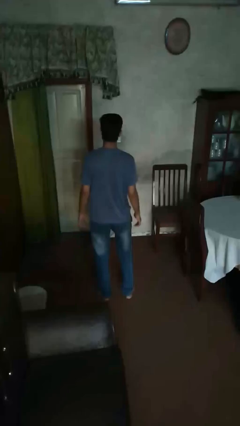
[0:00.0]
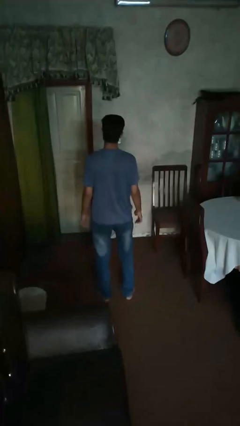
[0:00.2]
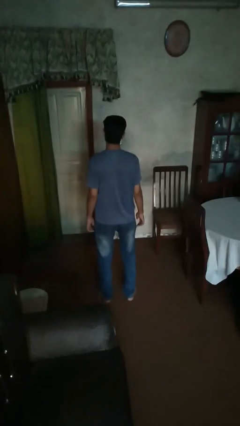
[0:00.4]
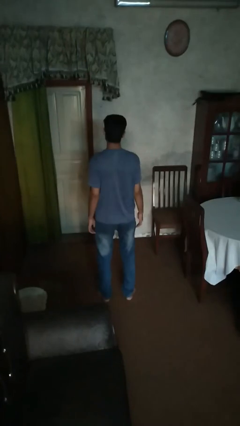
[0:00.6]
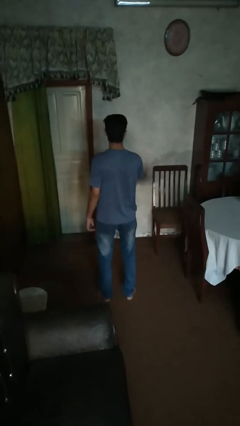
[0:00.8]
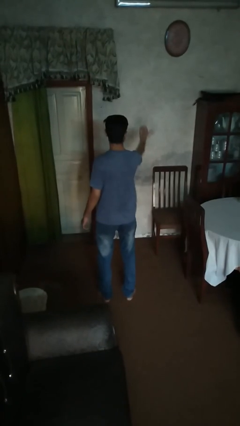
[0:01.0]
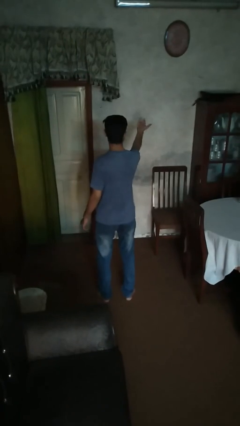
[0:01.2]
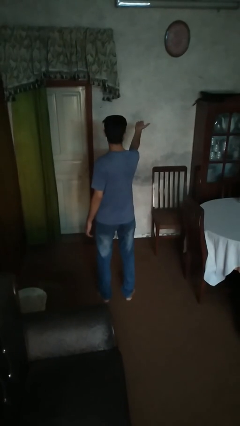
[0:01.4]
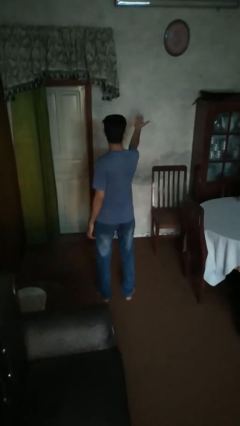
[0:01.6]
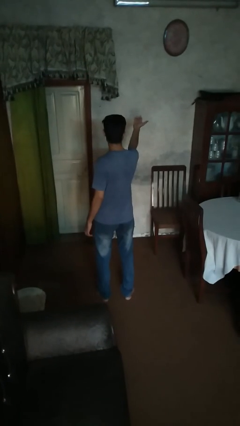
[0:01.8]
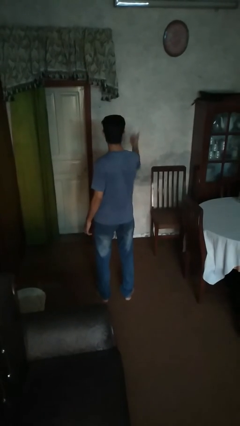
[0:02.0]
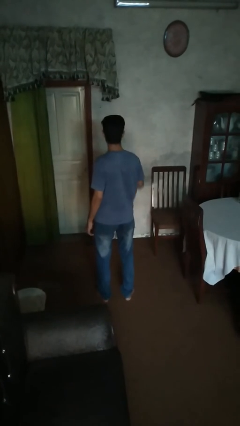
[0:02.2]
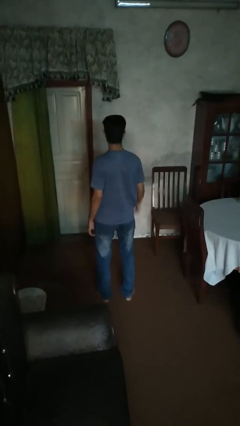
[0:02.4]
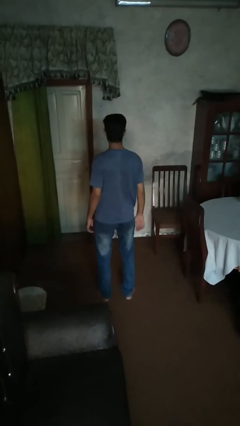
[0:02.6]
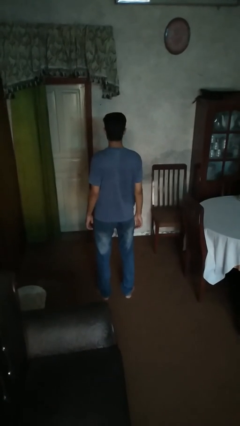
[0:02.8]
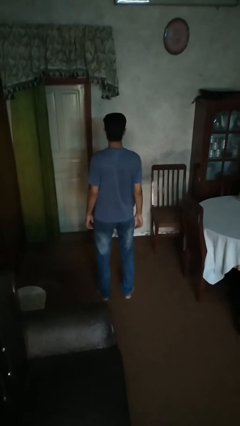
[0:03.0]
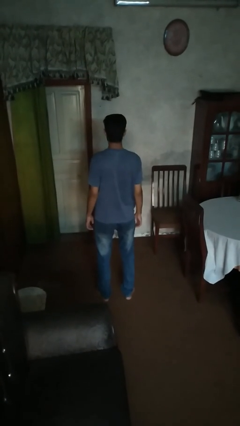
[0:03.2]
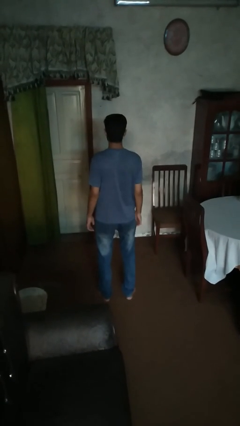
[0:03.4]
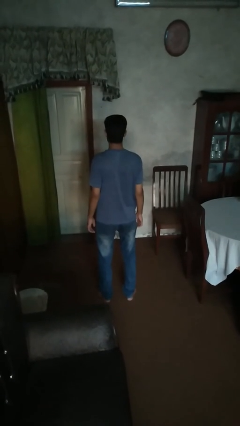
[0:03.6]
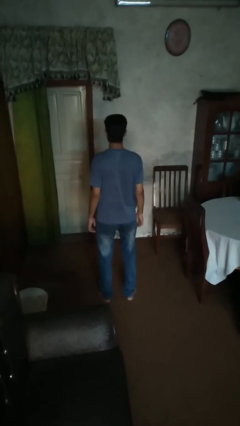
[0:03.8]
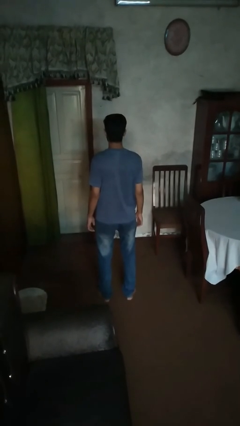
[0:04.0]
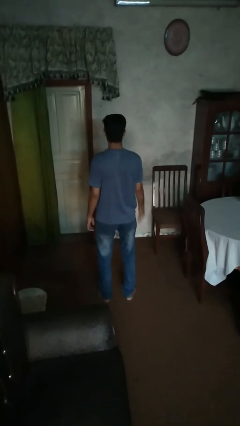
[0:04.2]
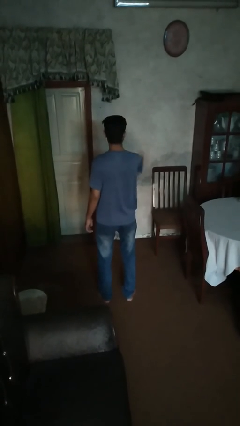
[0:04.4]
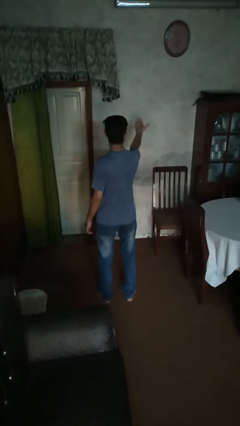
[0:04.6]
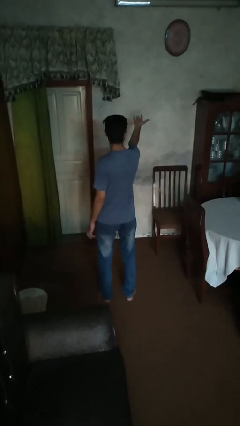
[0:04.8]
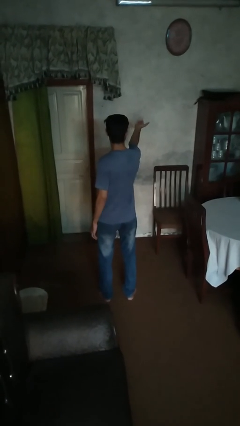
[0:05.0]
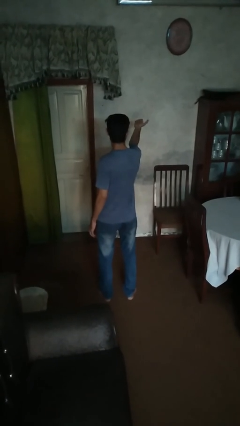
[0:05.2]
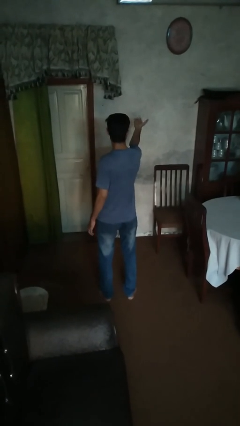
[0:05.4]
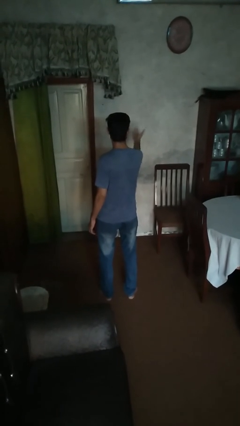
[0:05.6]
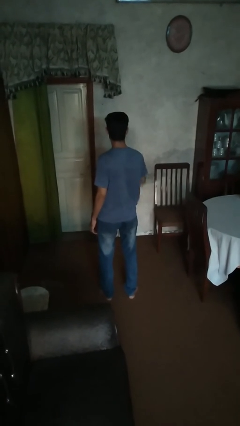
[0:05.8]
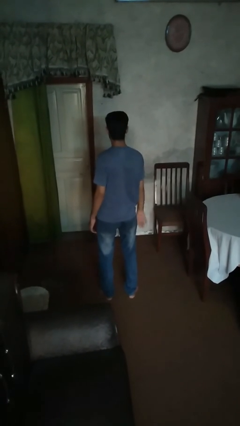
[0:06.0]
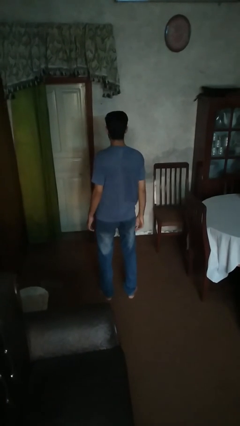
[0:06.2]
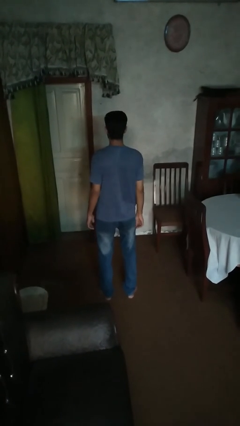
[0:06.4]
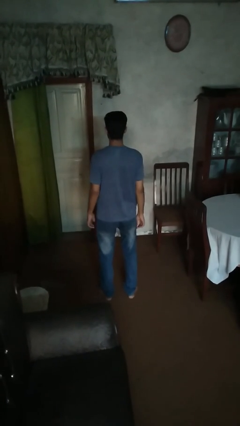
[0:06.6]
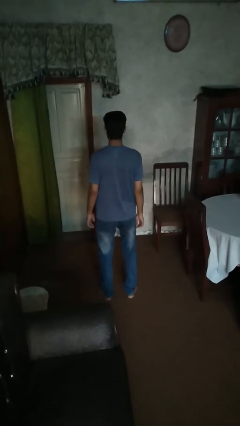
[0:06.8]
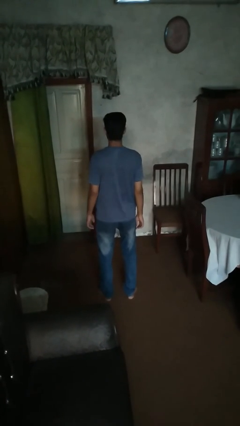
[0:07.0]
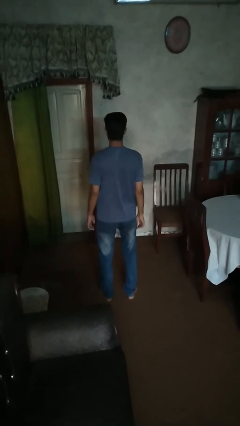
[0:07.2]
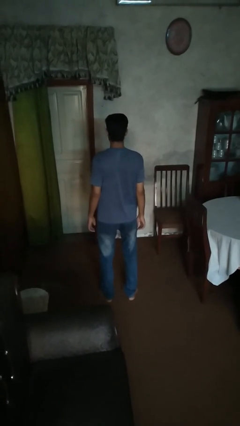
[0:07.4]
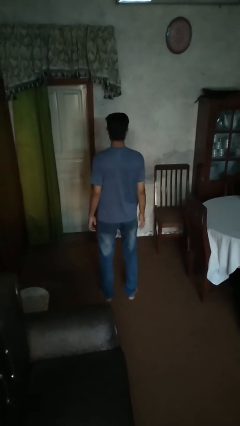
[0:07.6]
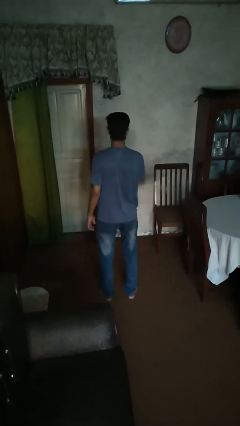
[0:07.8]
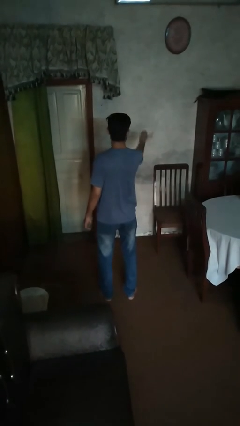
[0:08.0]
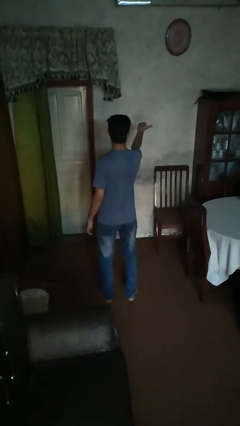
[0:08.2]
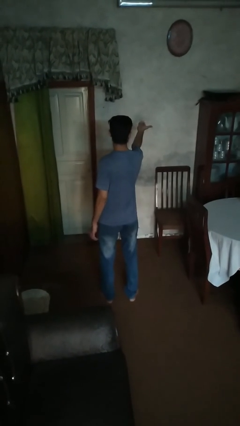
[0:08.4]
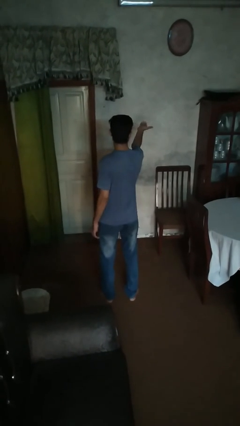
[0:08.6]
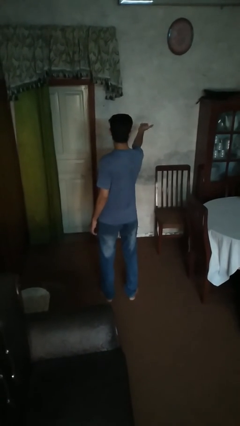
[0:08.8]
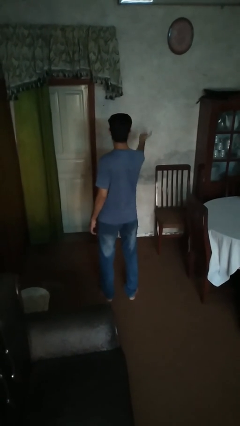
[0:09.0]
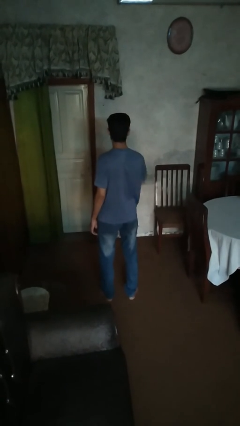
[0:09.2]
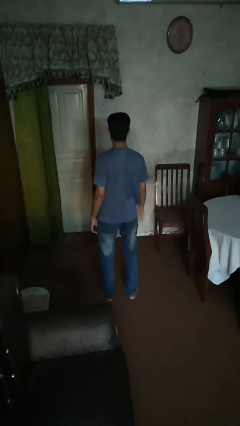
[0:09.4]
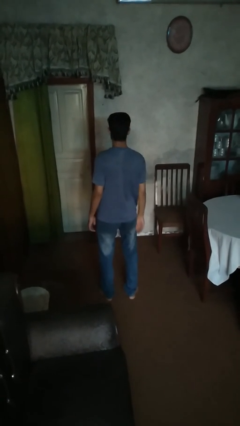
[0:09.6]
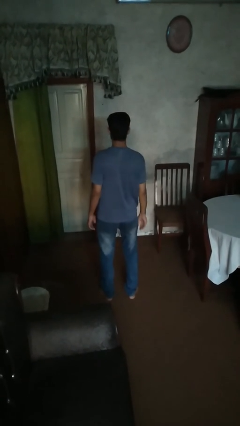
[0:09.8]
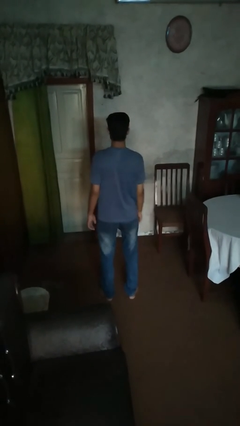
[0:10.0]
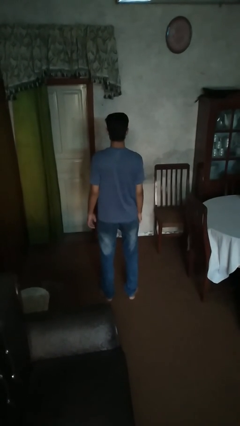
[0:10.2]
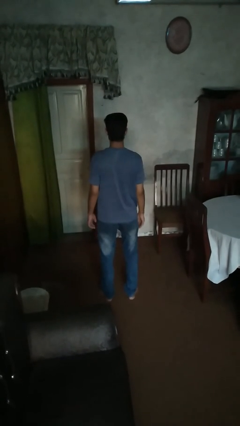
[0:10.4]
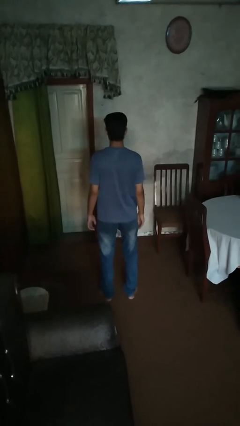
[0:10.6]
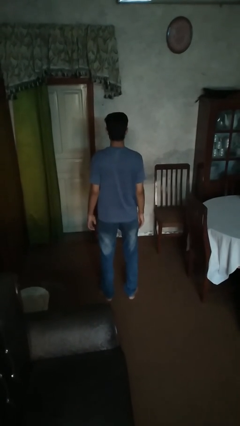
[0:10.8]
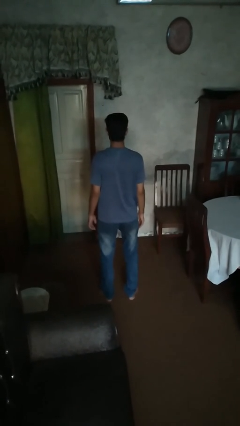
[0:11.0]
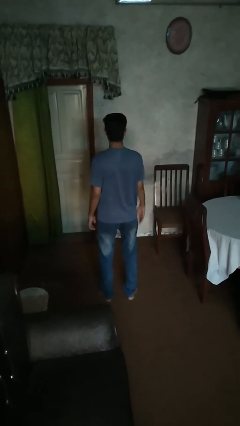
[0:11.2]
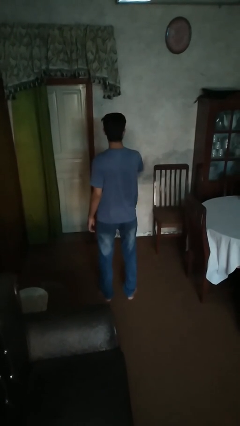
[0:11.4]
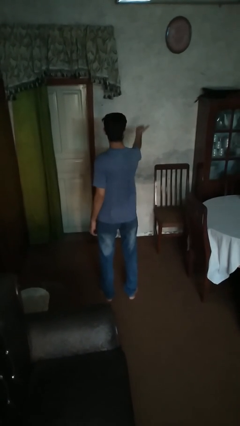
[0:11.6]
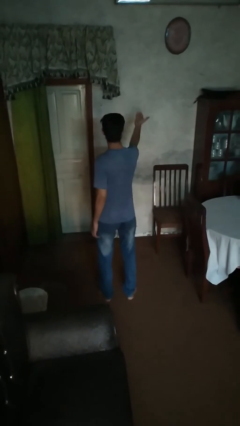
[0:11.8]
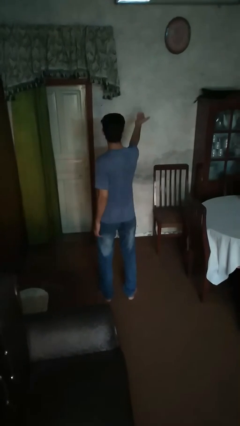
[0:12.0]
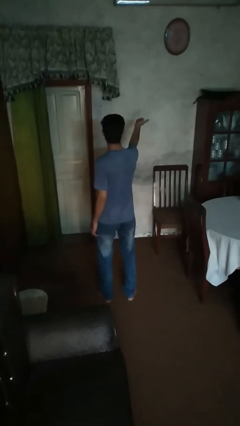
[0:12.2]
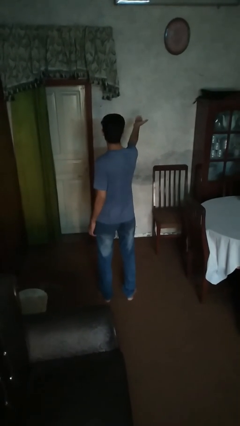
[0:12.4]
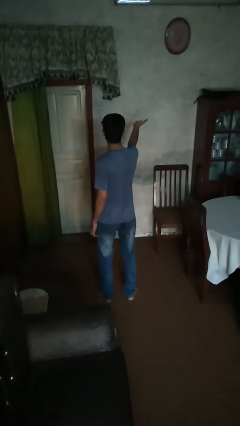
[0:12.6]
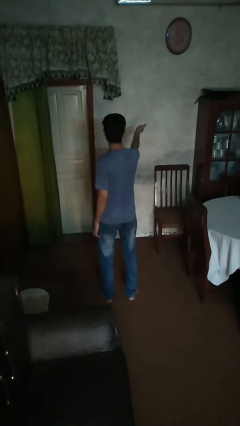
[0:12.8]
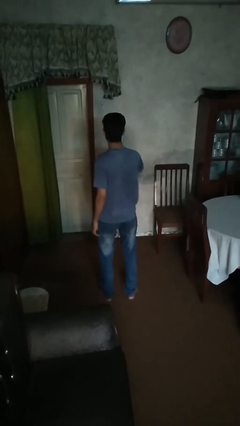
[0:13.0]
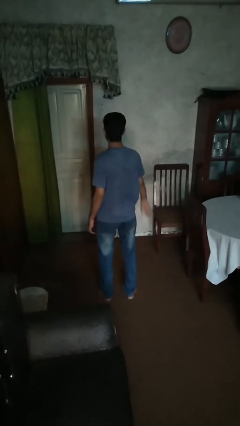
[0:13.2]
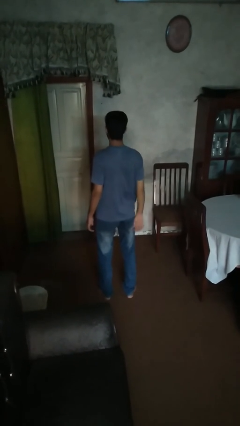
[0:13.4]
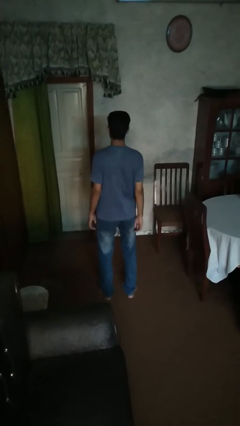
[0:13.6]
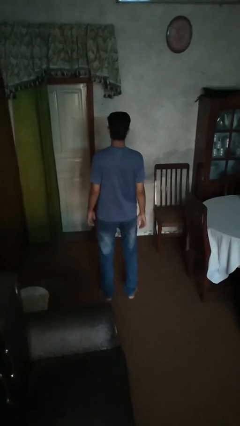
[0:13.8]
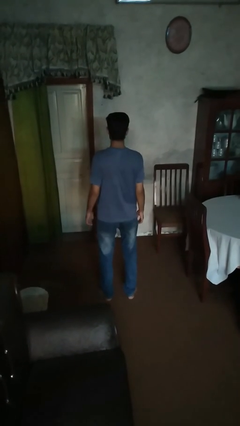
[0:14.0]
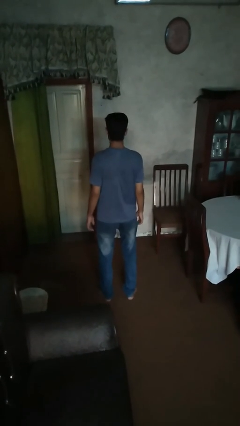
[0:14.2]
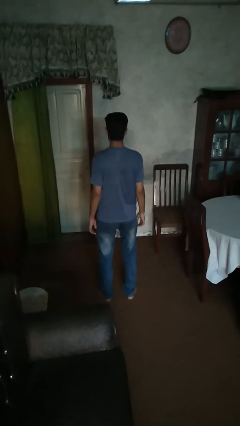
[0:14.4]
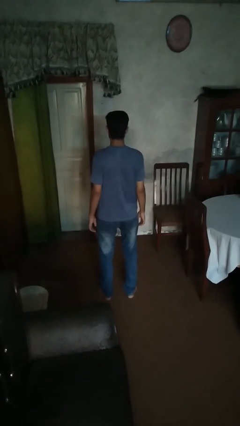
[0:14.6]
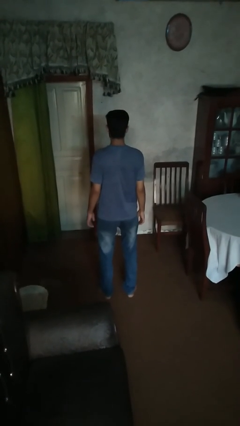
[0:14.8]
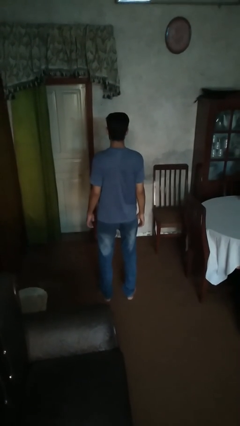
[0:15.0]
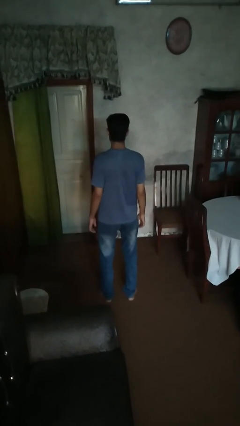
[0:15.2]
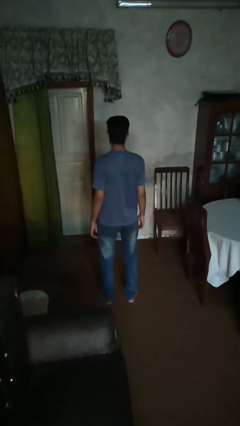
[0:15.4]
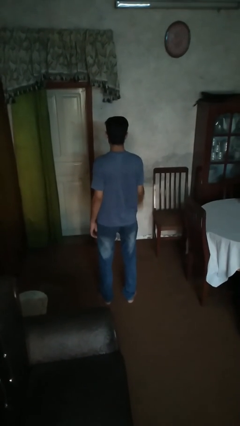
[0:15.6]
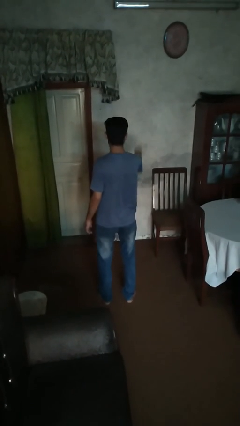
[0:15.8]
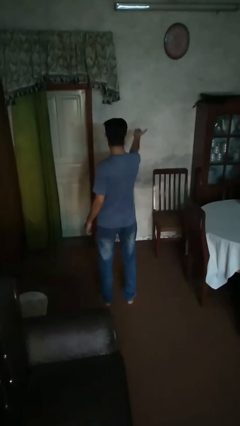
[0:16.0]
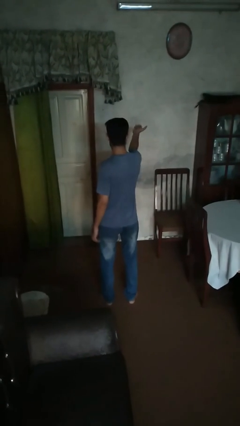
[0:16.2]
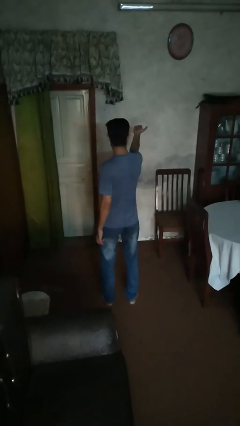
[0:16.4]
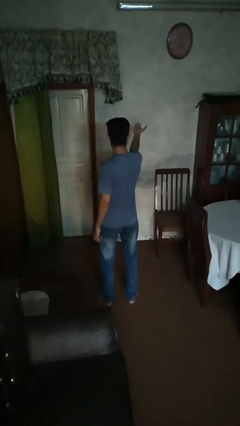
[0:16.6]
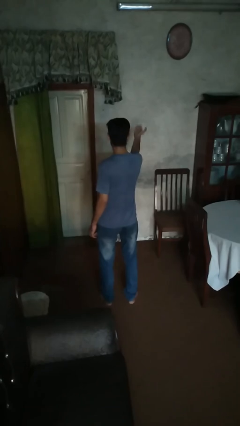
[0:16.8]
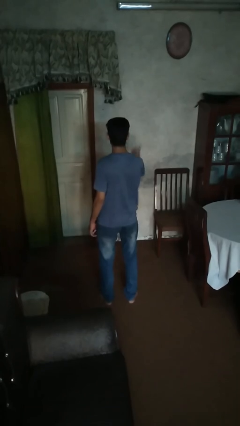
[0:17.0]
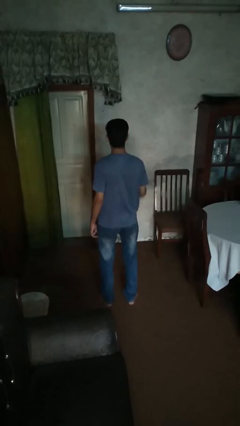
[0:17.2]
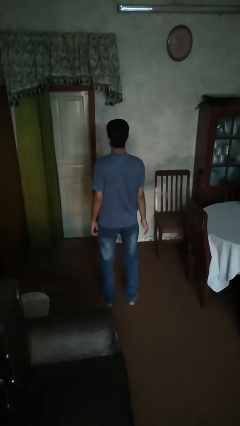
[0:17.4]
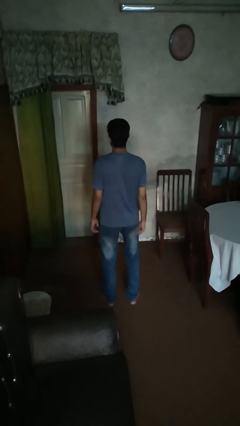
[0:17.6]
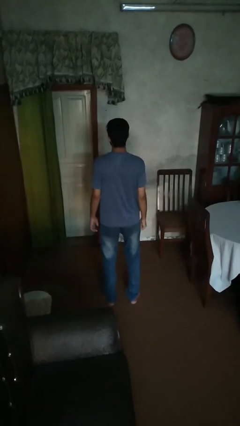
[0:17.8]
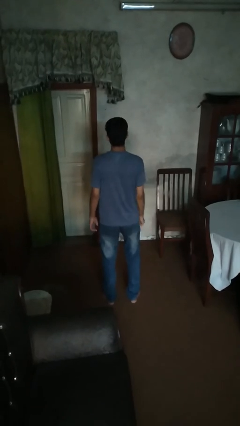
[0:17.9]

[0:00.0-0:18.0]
person gestures come here

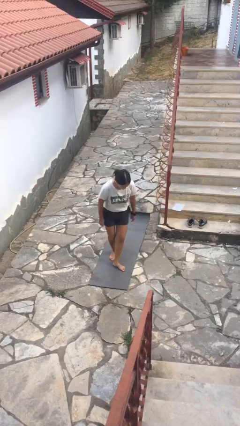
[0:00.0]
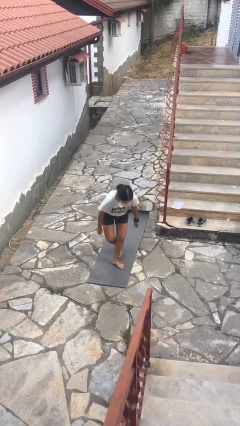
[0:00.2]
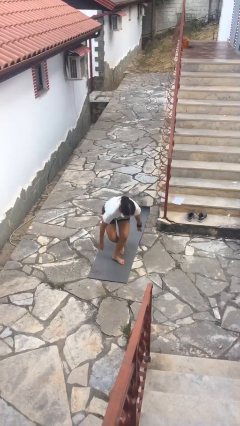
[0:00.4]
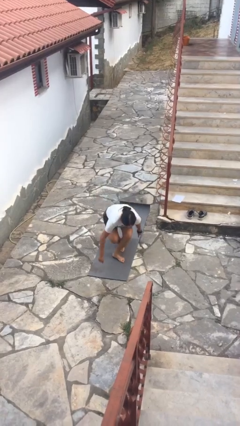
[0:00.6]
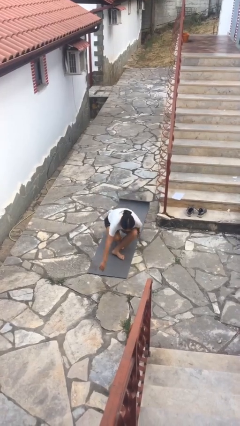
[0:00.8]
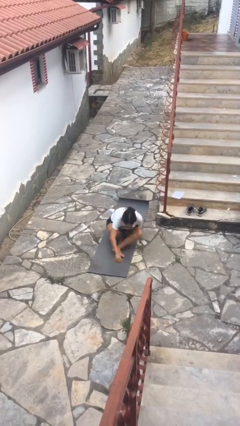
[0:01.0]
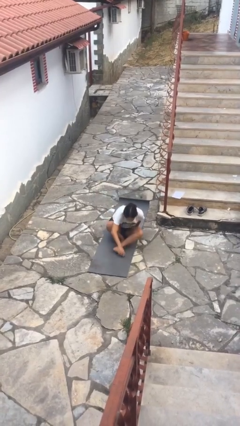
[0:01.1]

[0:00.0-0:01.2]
person sits crisscross
